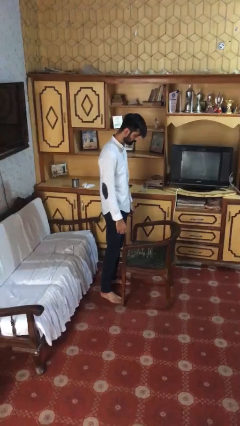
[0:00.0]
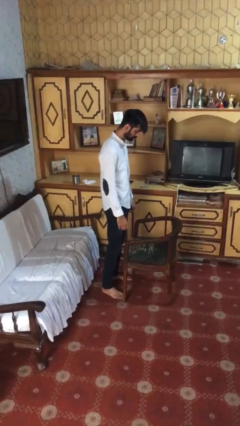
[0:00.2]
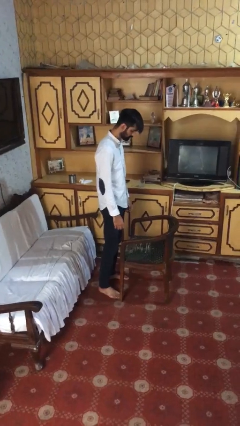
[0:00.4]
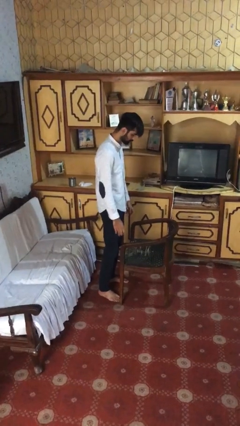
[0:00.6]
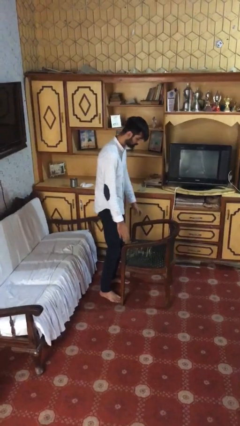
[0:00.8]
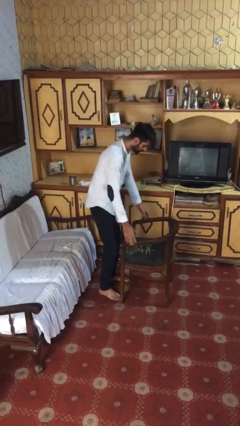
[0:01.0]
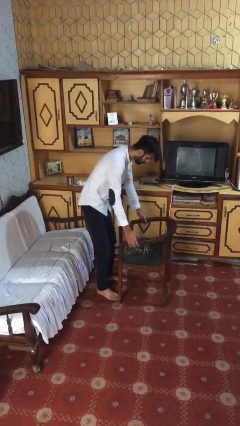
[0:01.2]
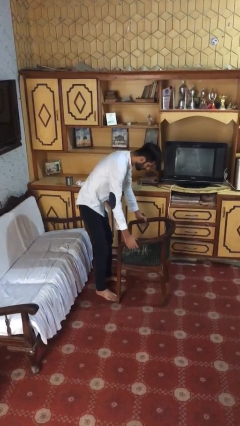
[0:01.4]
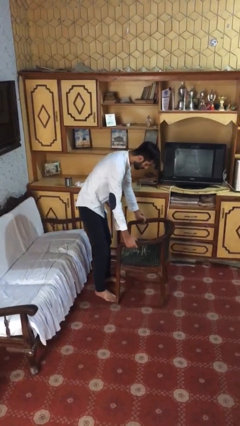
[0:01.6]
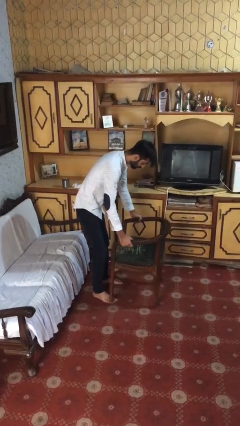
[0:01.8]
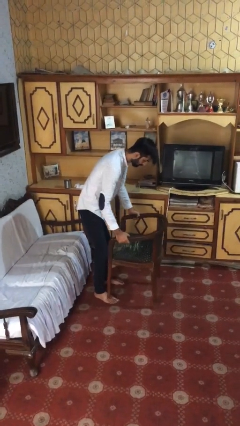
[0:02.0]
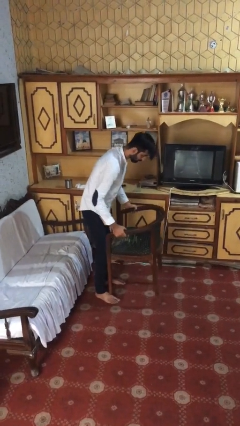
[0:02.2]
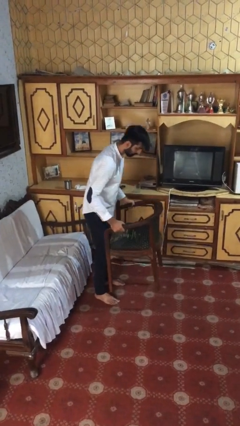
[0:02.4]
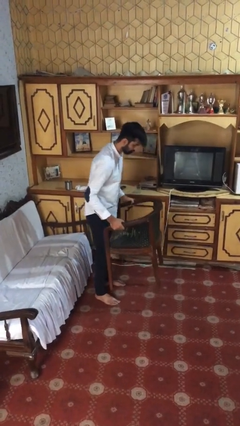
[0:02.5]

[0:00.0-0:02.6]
person picks up object from floor

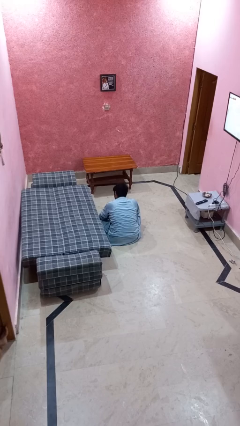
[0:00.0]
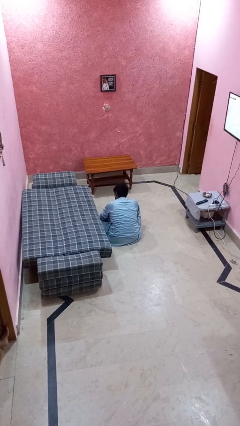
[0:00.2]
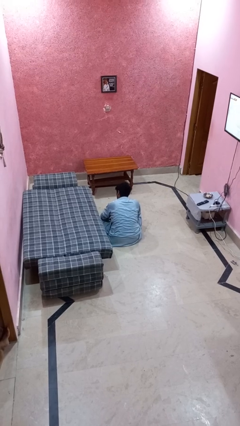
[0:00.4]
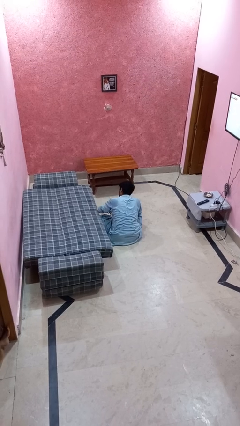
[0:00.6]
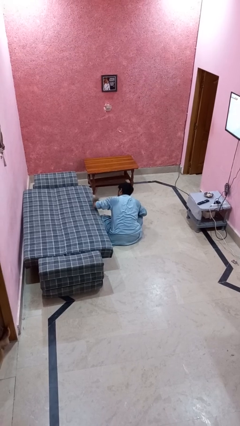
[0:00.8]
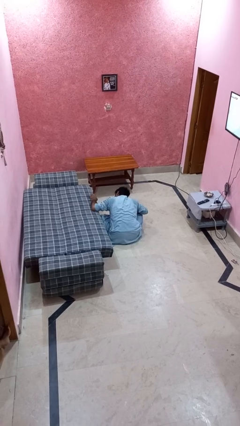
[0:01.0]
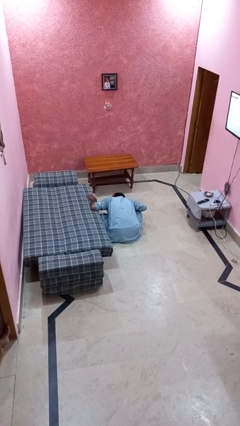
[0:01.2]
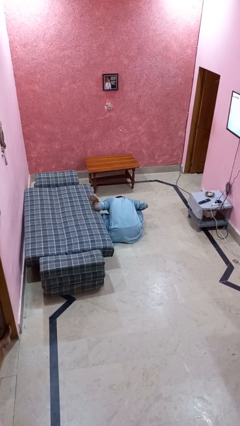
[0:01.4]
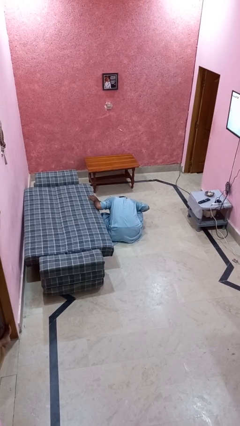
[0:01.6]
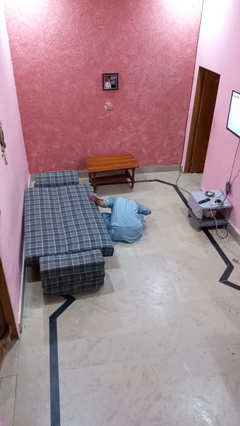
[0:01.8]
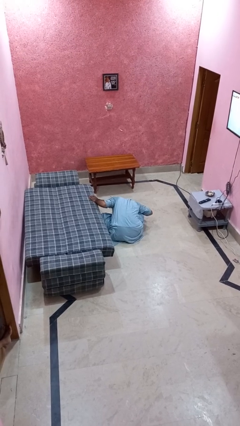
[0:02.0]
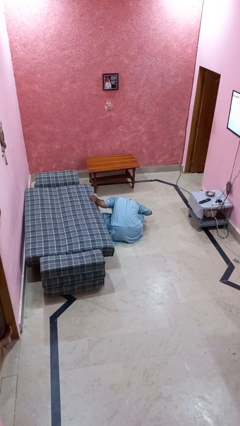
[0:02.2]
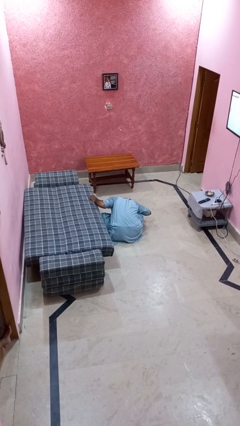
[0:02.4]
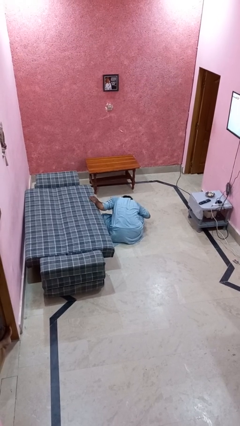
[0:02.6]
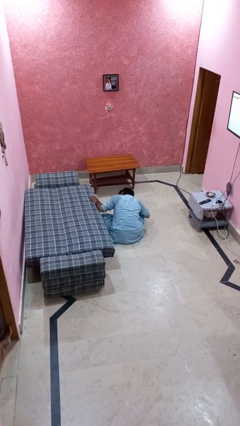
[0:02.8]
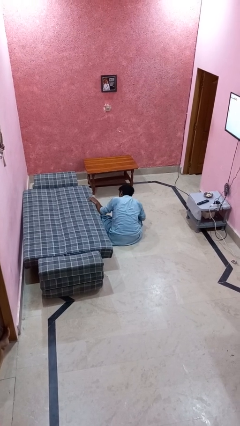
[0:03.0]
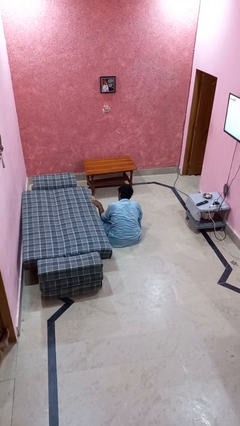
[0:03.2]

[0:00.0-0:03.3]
person searches under bed

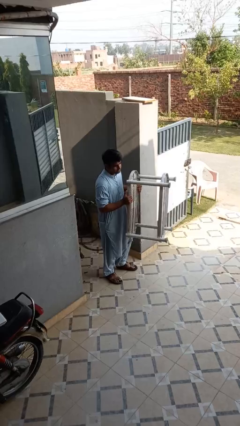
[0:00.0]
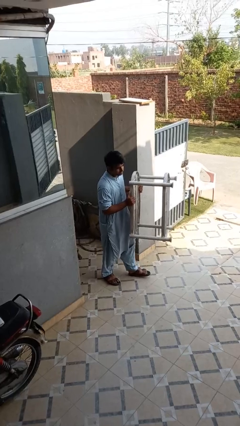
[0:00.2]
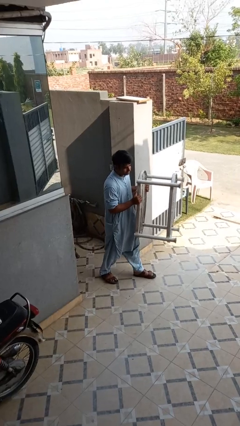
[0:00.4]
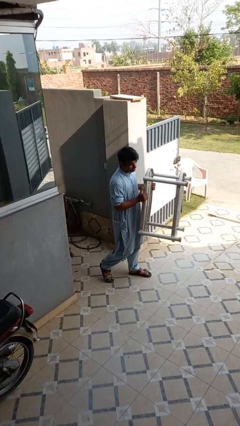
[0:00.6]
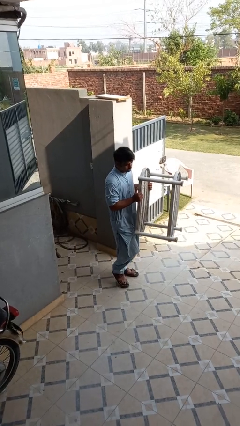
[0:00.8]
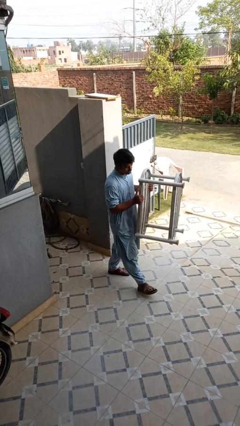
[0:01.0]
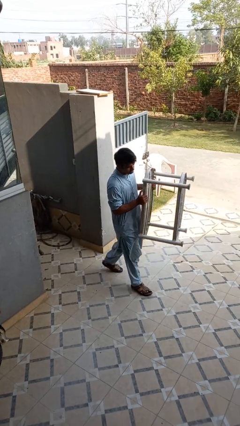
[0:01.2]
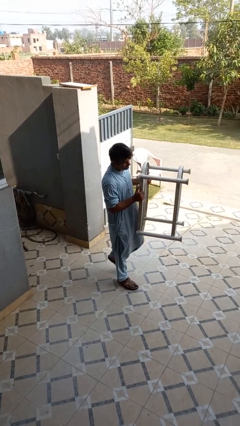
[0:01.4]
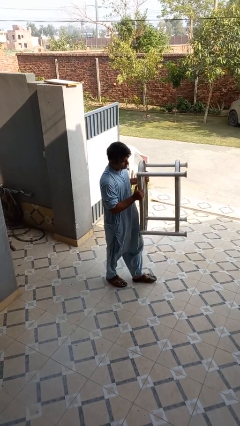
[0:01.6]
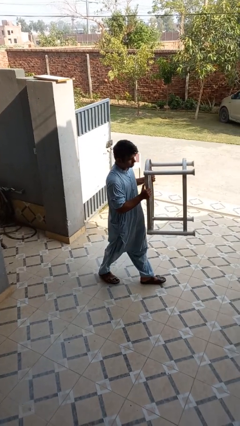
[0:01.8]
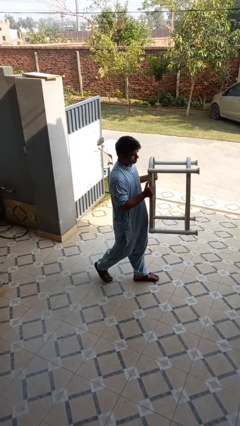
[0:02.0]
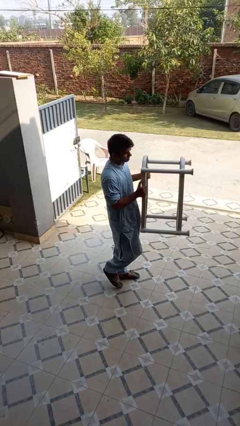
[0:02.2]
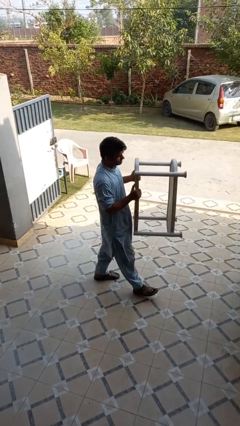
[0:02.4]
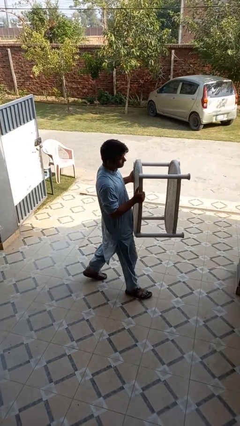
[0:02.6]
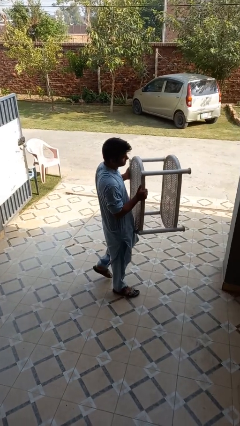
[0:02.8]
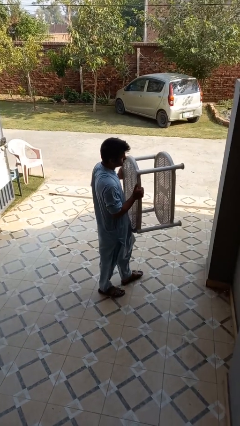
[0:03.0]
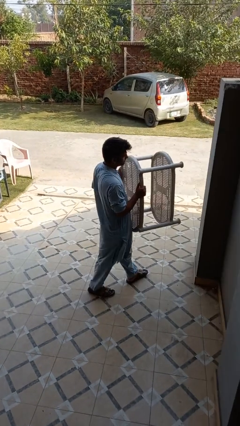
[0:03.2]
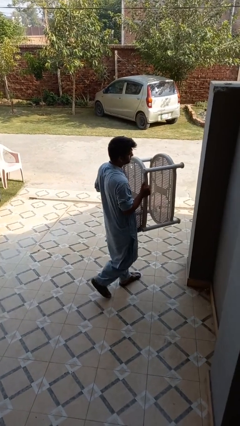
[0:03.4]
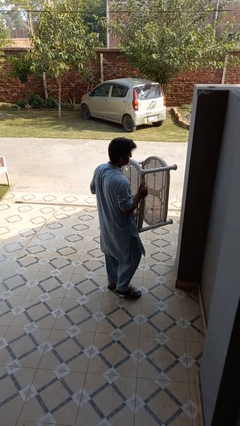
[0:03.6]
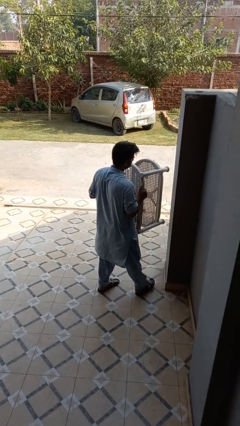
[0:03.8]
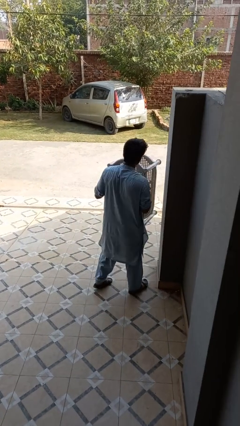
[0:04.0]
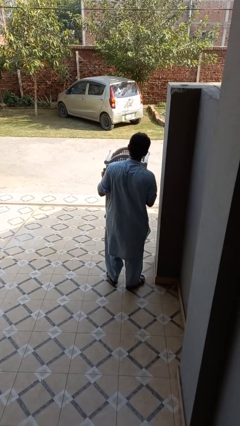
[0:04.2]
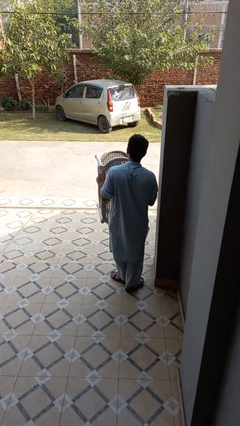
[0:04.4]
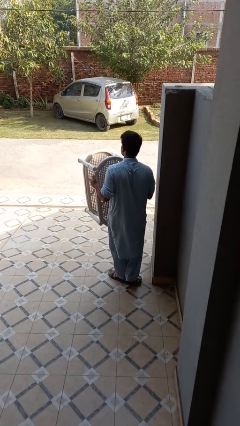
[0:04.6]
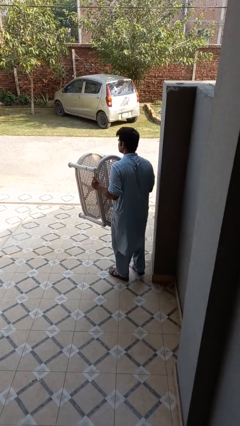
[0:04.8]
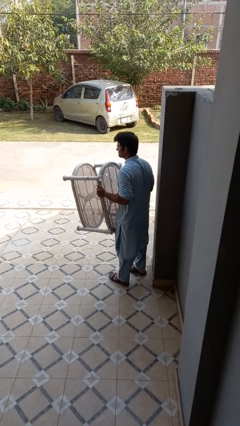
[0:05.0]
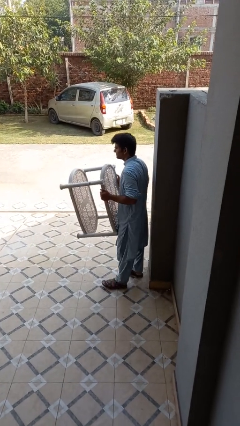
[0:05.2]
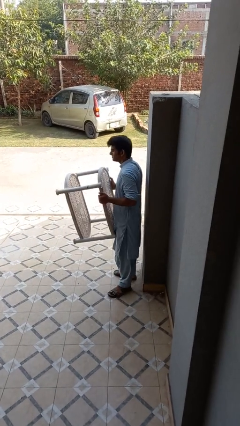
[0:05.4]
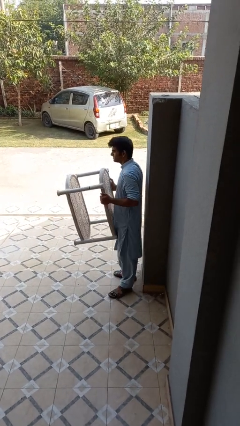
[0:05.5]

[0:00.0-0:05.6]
person carries furniture

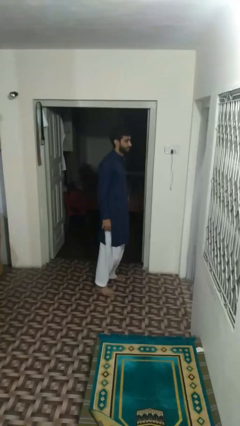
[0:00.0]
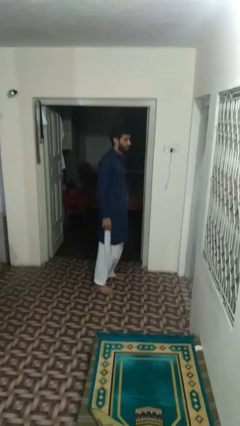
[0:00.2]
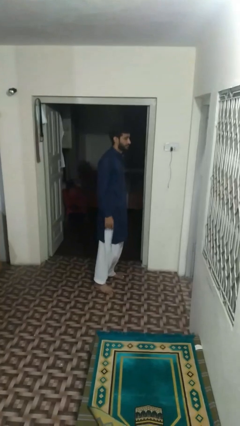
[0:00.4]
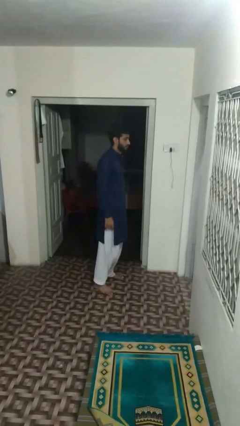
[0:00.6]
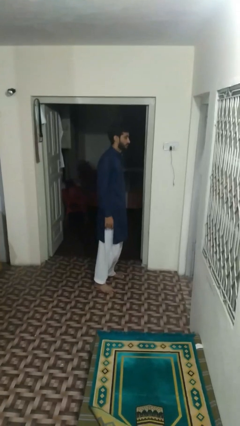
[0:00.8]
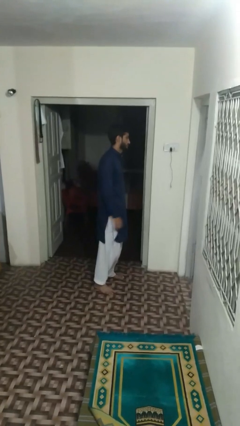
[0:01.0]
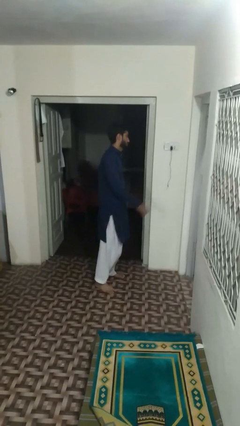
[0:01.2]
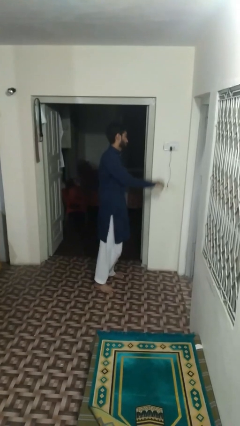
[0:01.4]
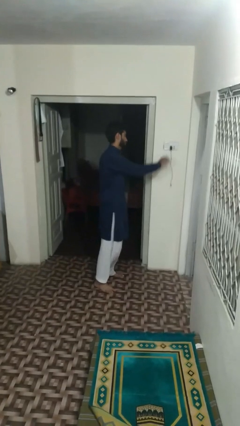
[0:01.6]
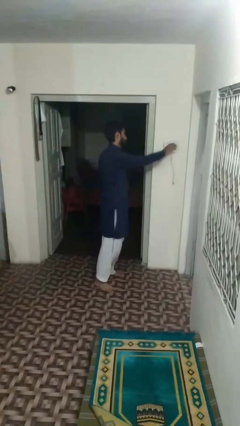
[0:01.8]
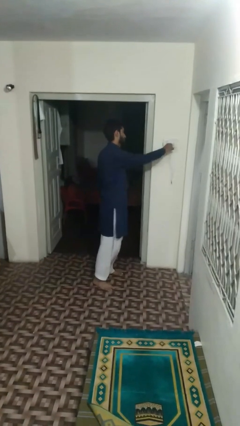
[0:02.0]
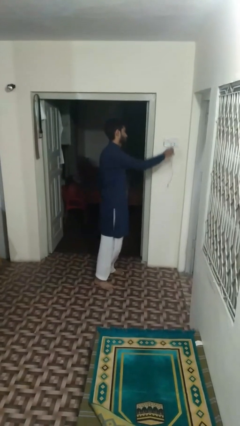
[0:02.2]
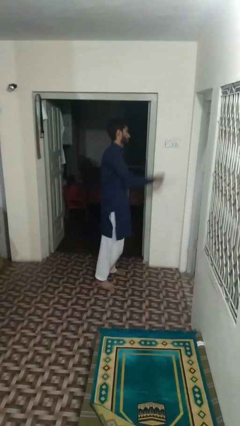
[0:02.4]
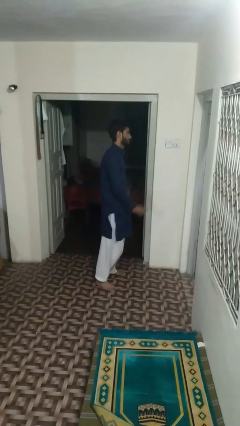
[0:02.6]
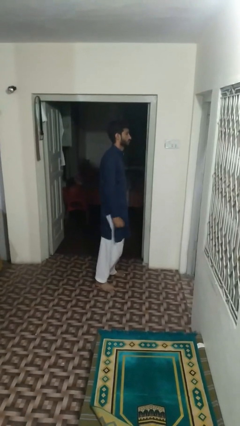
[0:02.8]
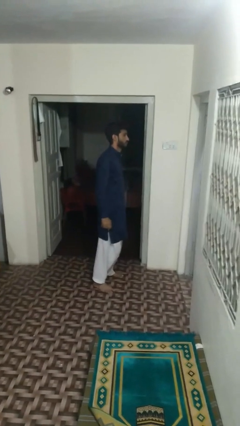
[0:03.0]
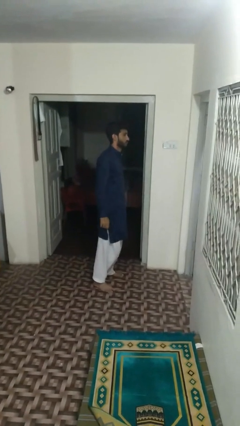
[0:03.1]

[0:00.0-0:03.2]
person unplugs from electrical socket

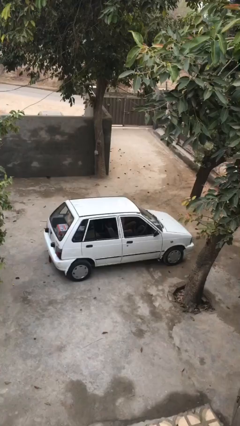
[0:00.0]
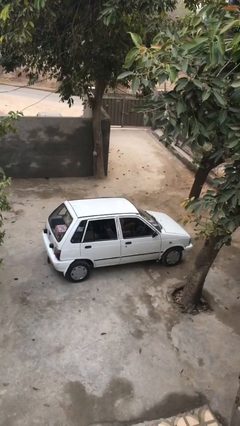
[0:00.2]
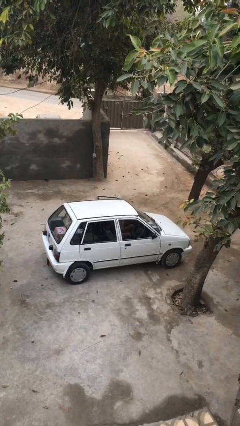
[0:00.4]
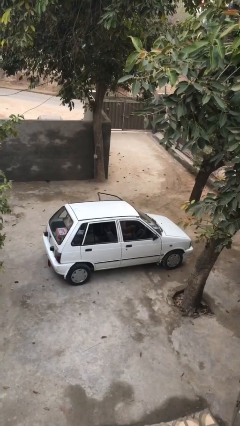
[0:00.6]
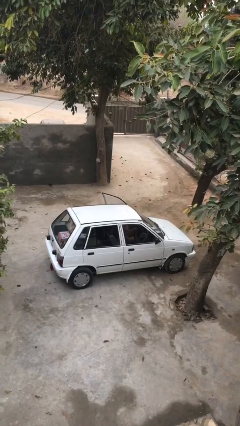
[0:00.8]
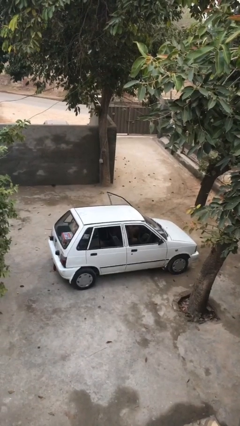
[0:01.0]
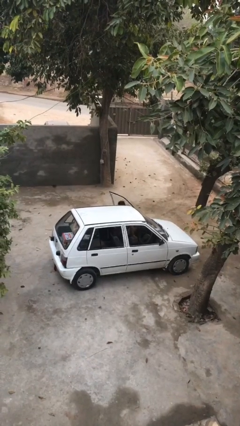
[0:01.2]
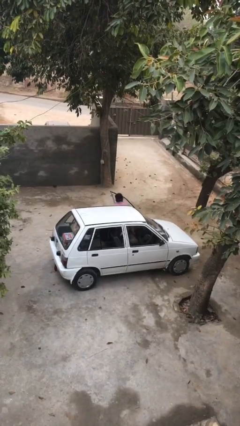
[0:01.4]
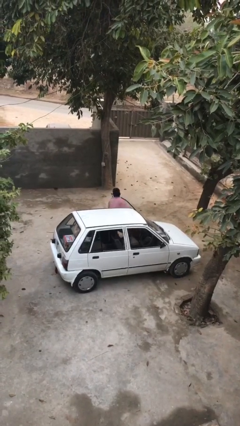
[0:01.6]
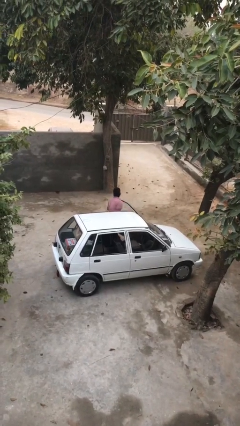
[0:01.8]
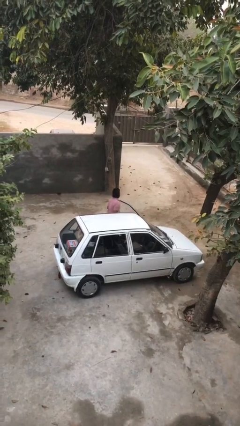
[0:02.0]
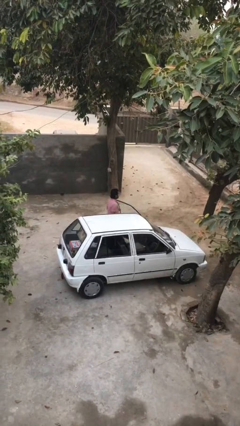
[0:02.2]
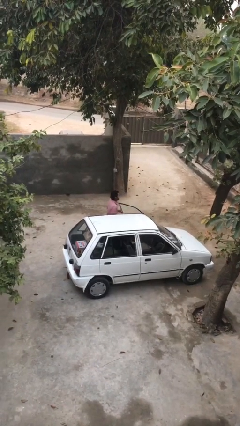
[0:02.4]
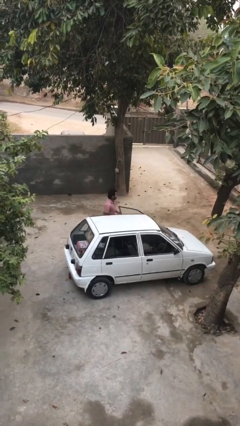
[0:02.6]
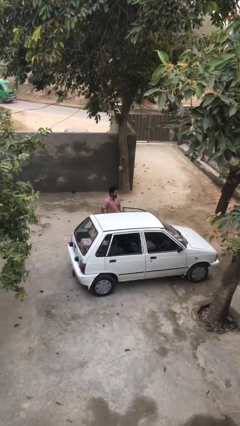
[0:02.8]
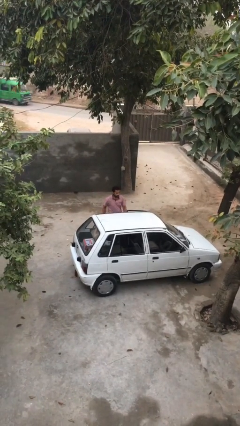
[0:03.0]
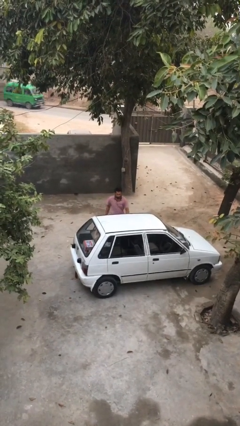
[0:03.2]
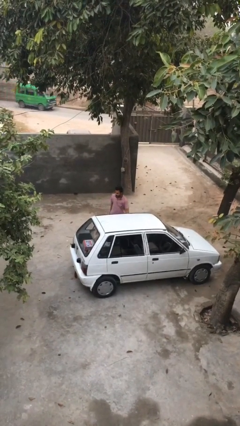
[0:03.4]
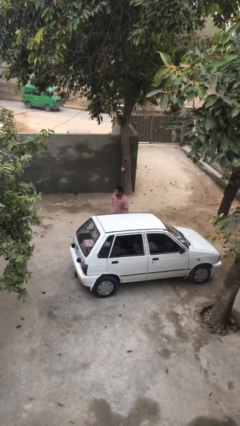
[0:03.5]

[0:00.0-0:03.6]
person exits car
